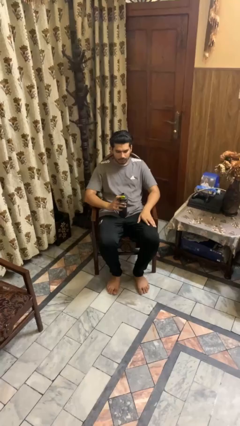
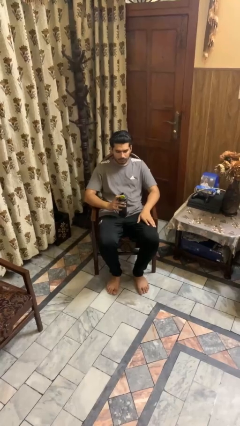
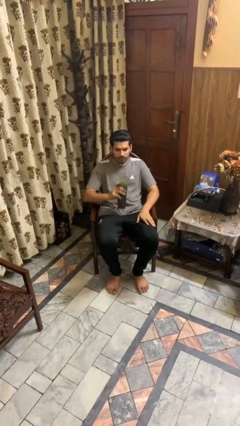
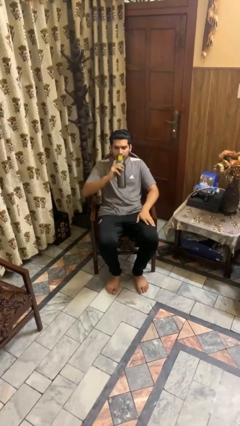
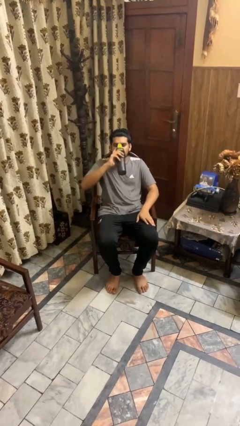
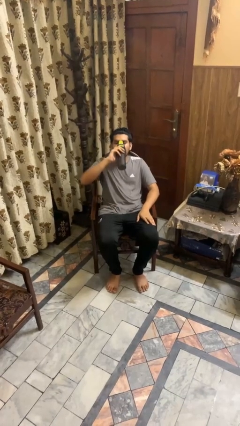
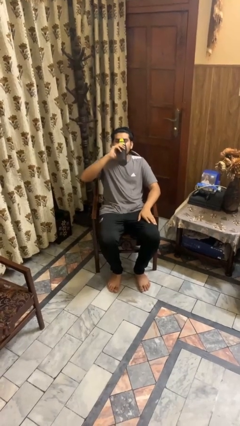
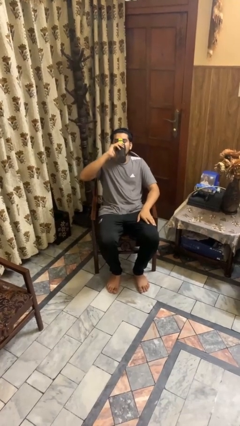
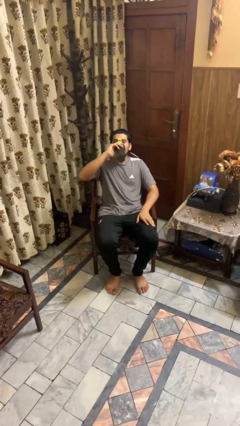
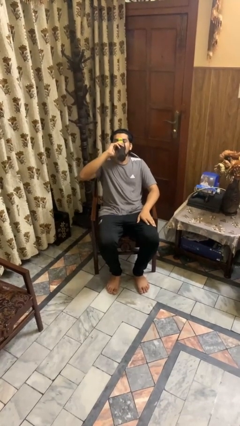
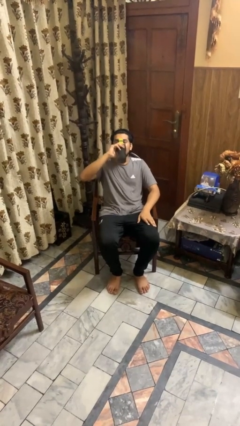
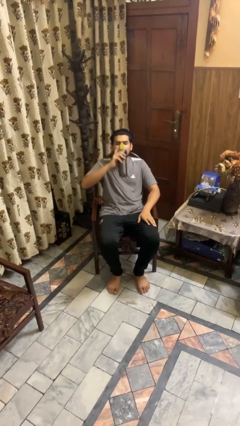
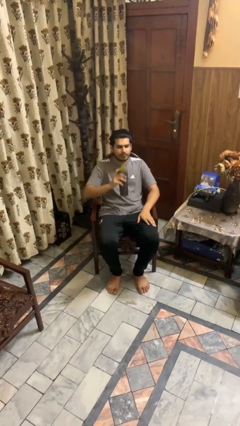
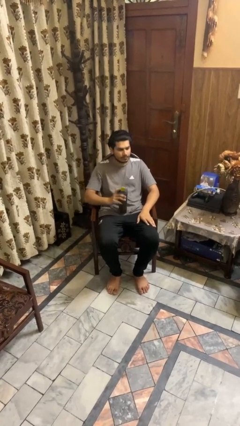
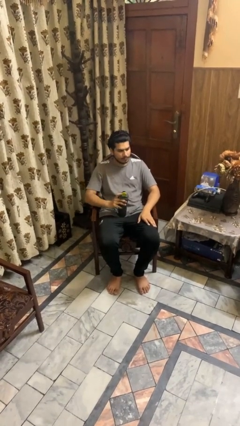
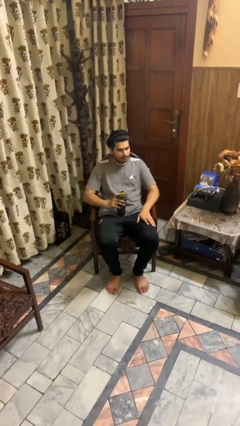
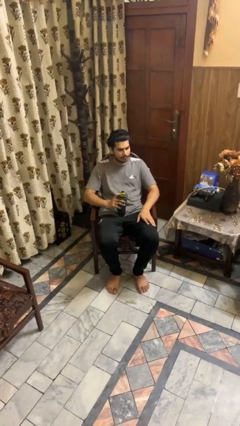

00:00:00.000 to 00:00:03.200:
person drinks from bottle

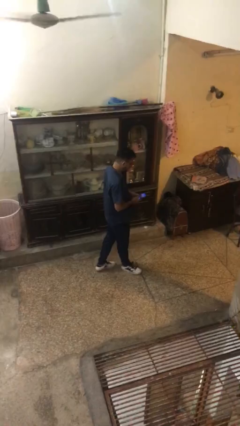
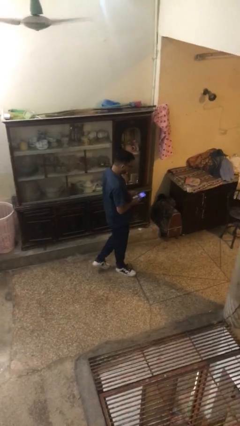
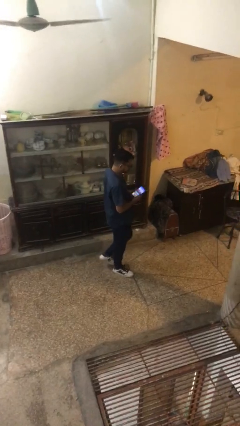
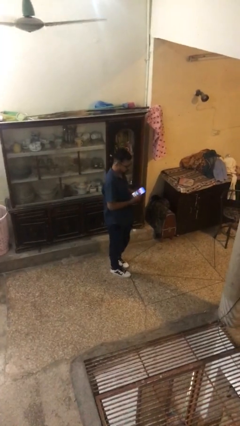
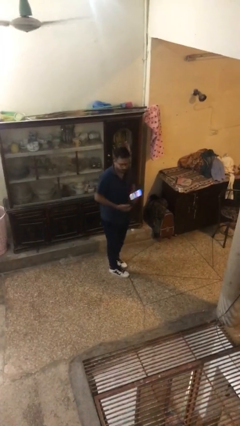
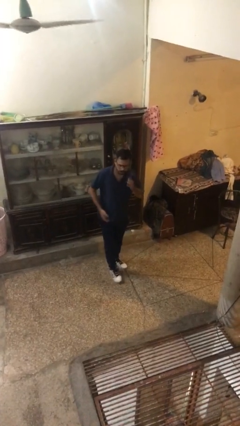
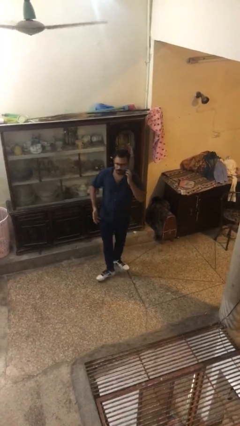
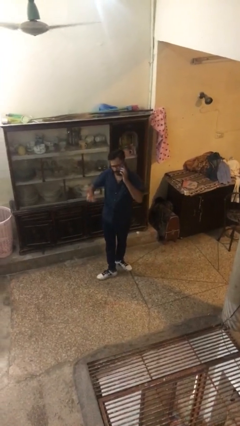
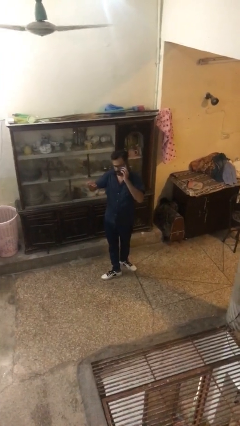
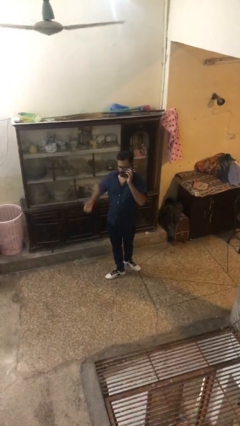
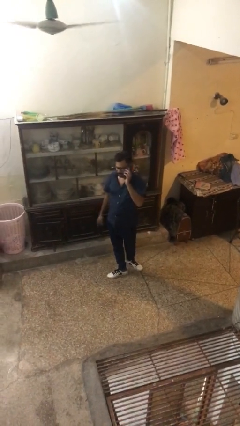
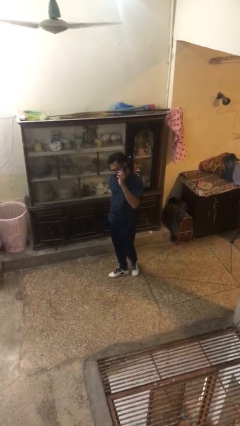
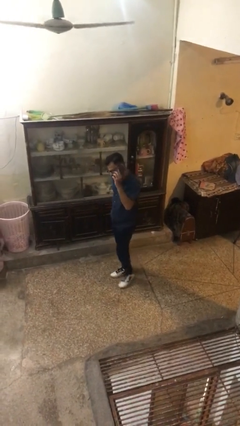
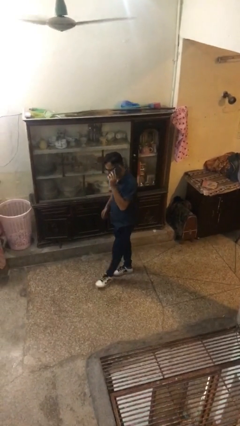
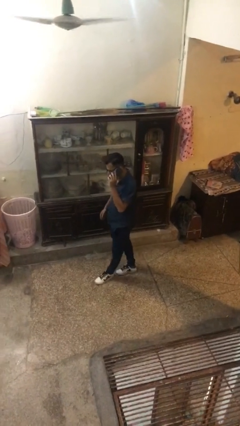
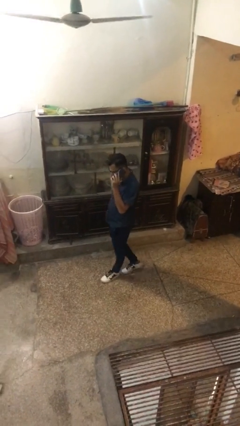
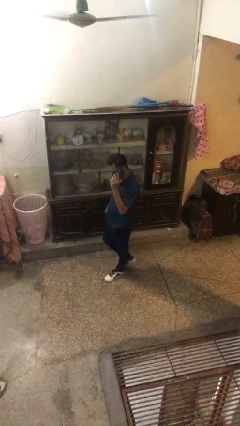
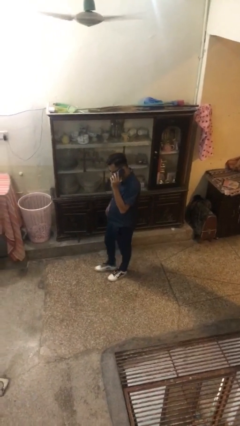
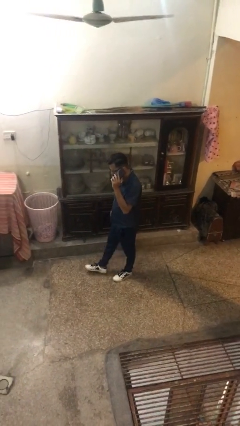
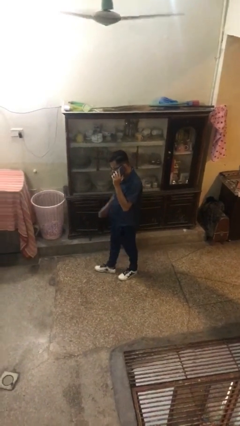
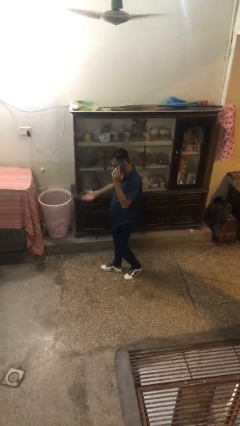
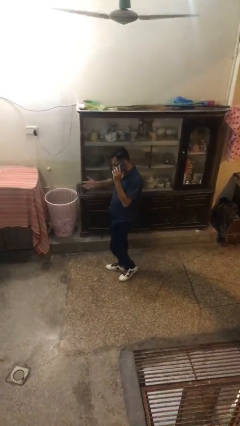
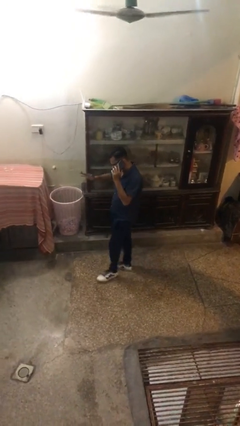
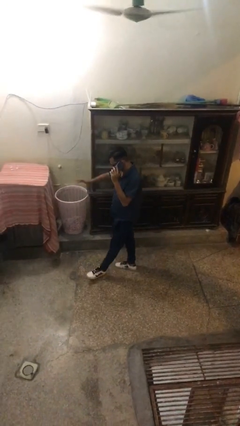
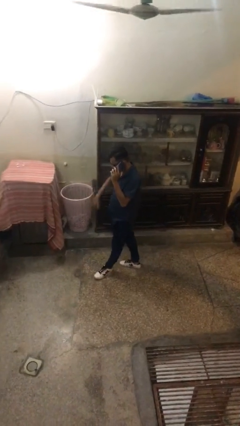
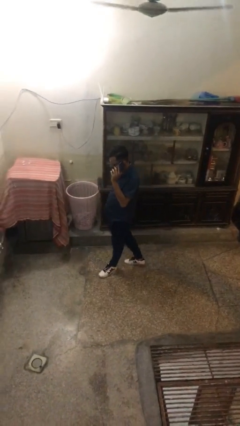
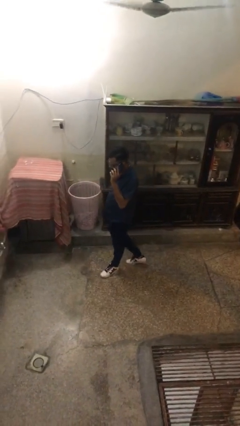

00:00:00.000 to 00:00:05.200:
person talks on phone

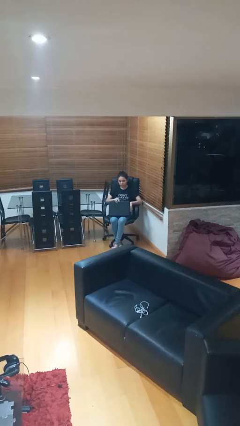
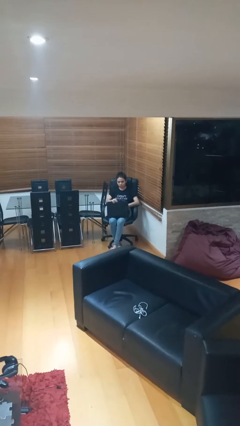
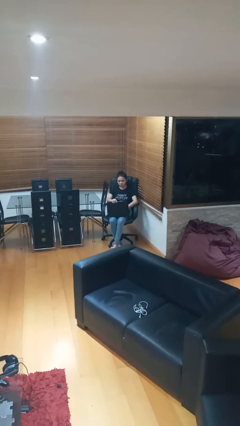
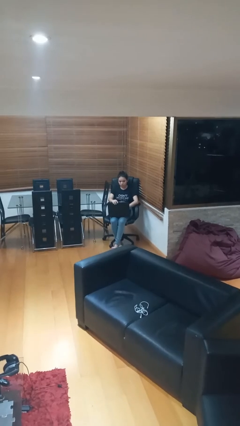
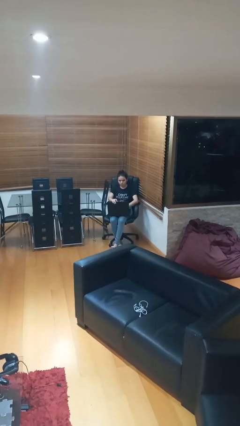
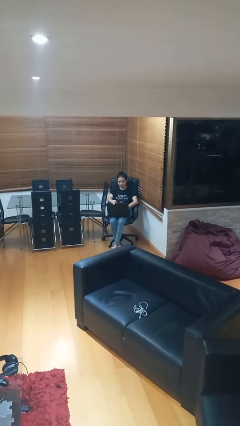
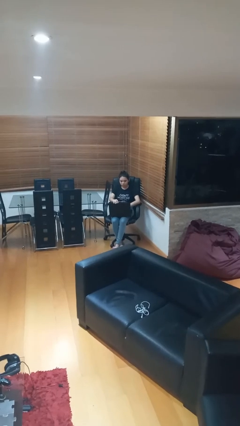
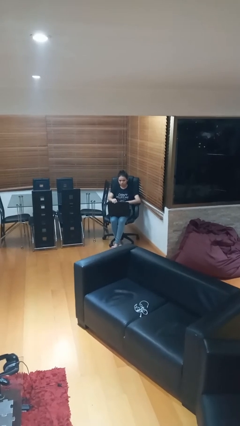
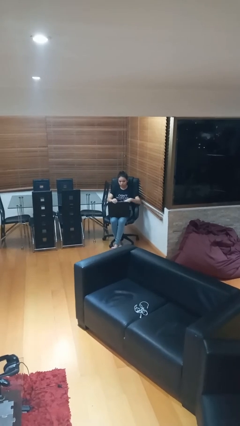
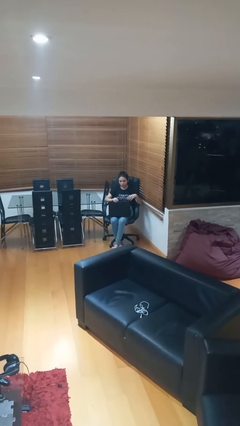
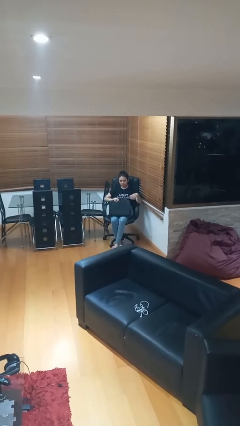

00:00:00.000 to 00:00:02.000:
person interacts with laptop

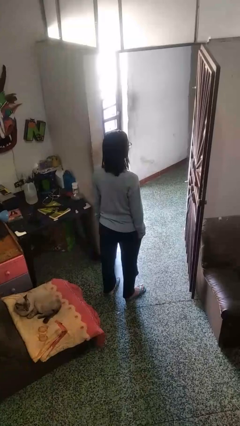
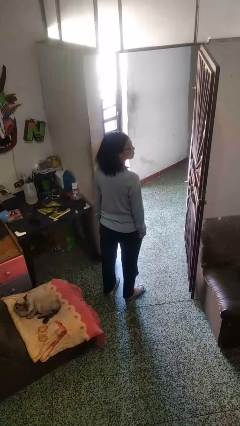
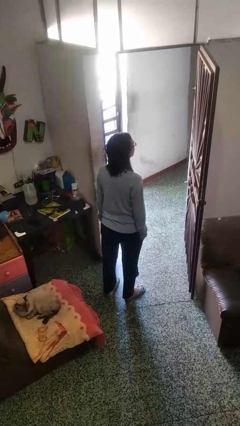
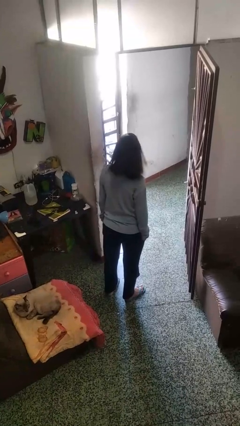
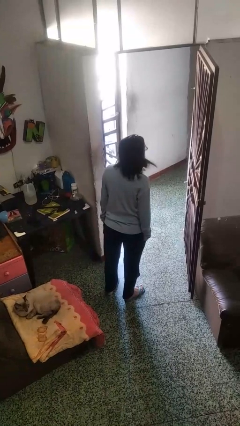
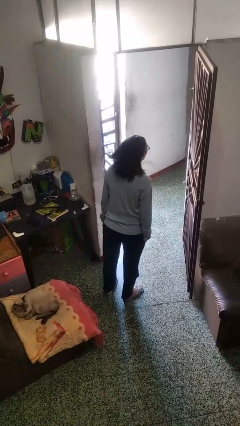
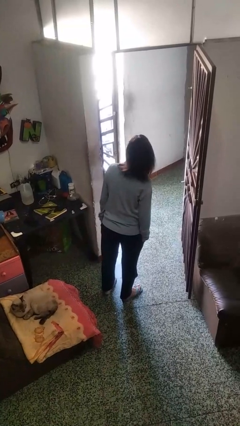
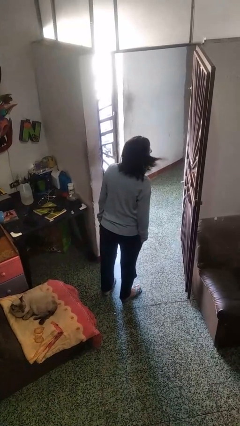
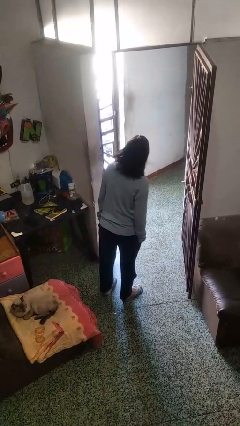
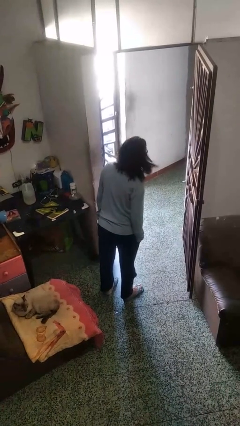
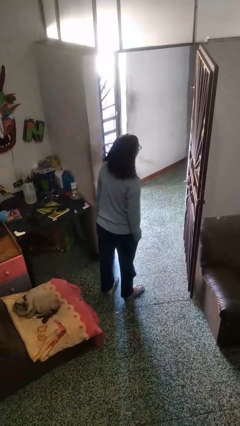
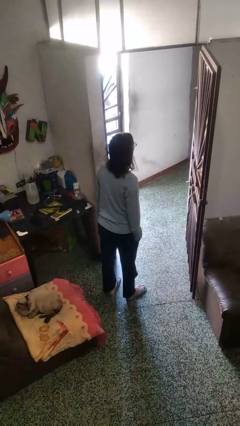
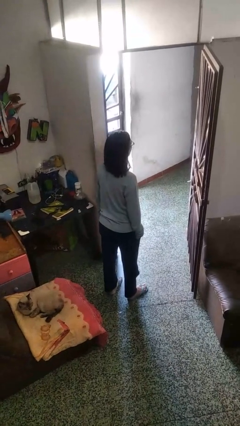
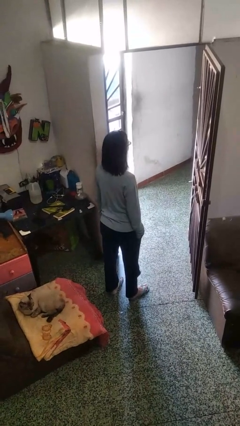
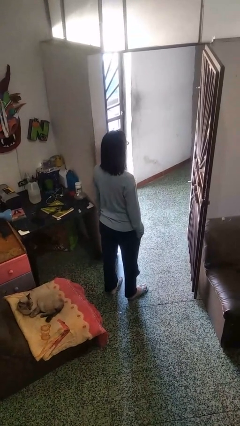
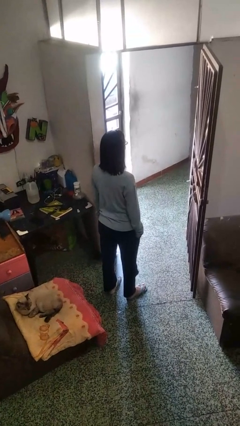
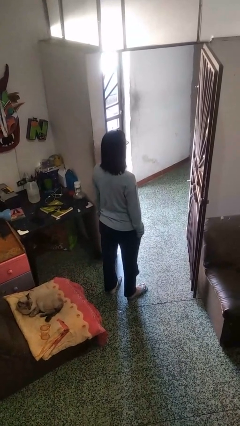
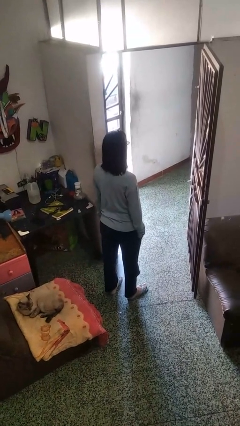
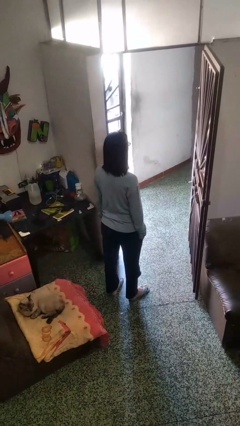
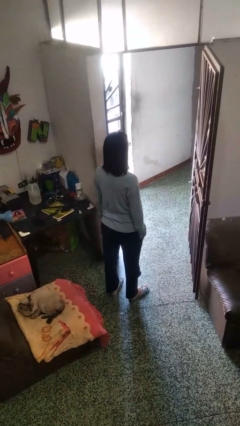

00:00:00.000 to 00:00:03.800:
person shakes head

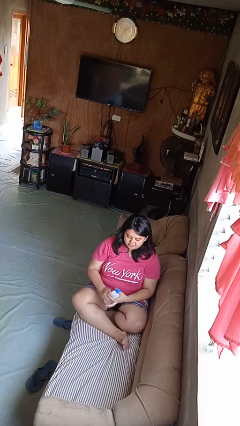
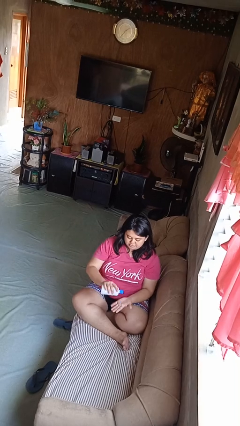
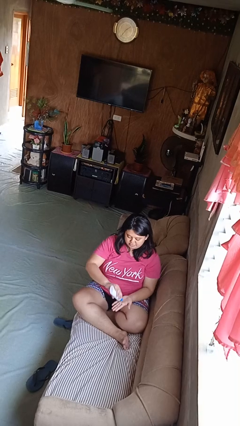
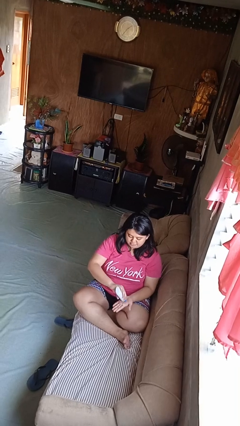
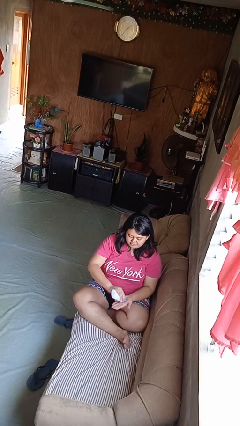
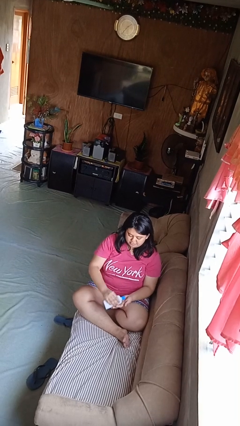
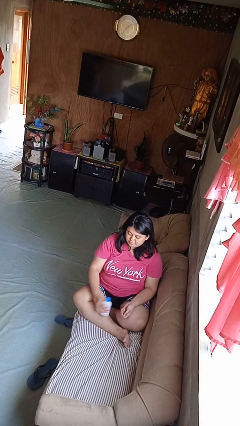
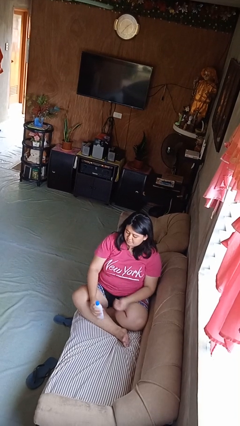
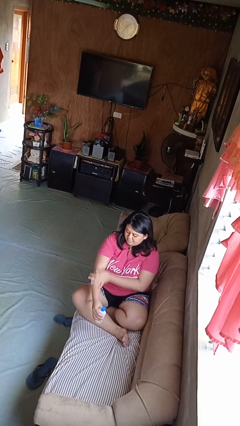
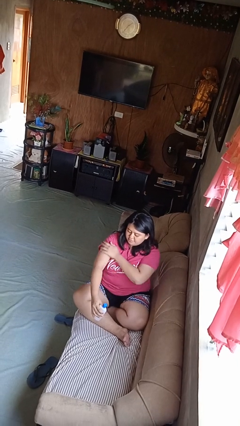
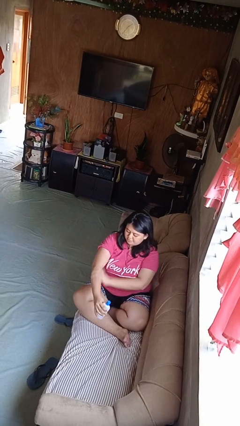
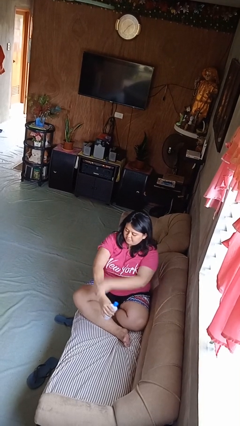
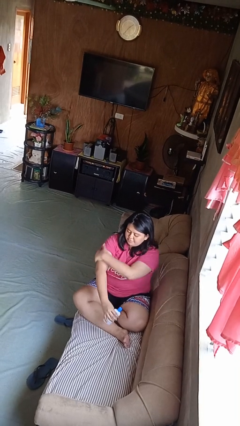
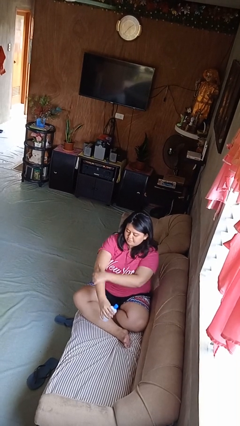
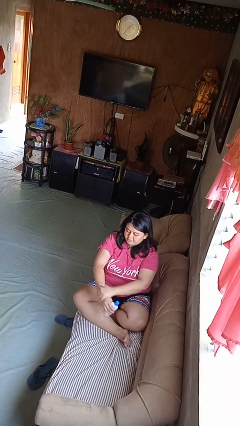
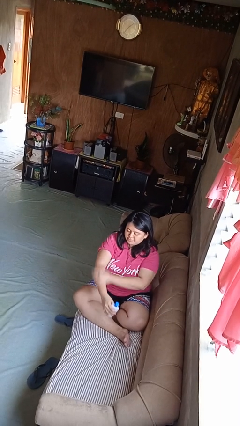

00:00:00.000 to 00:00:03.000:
person applies sunscreen

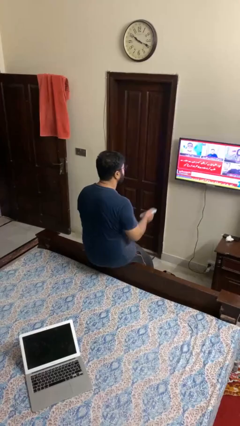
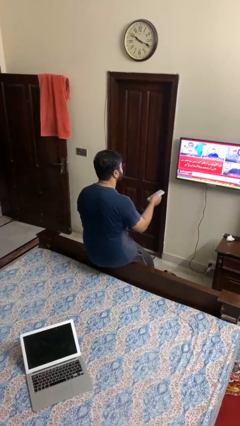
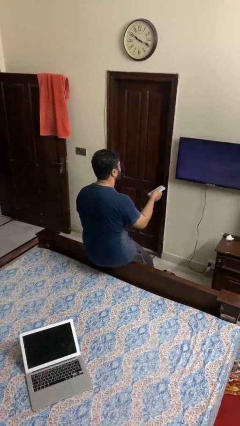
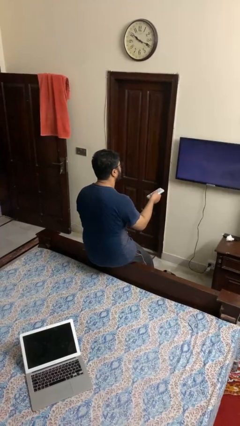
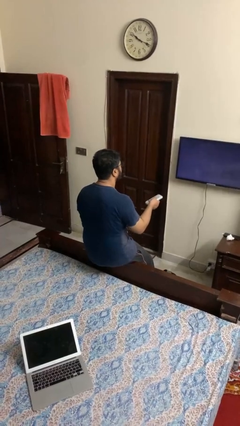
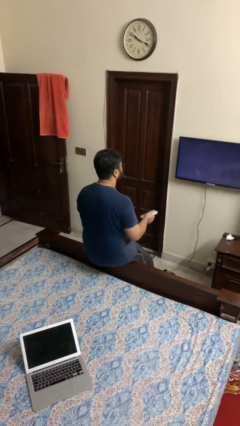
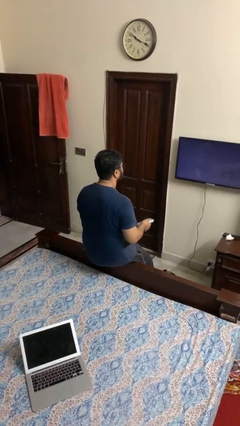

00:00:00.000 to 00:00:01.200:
person uses television remote
